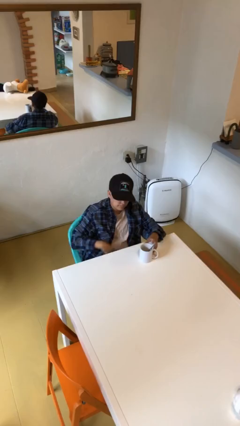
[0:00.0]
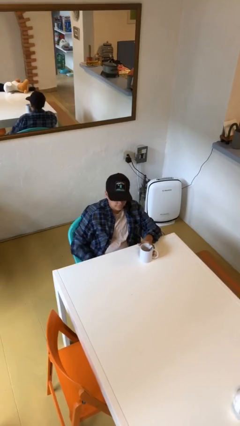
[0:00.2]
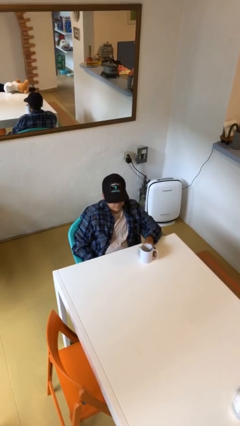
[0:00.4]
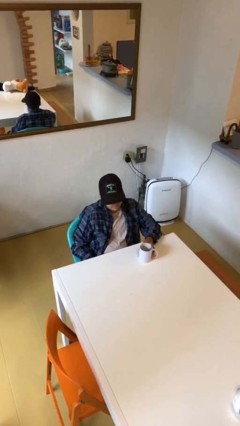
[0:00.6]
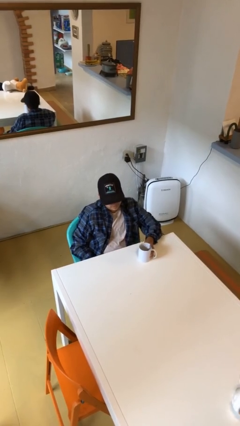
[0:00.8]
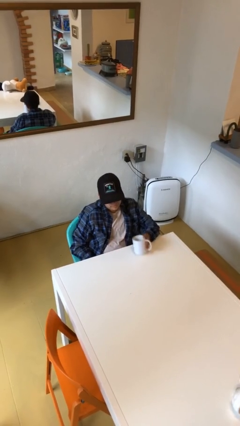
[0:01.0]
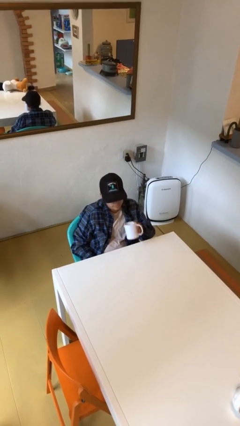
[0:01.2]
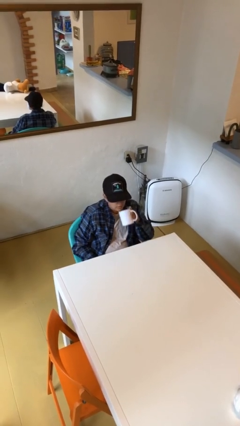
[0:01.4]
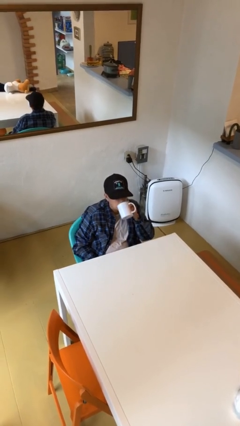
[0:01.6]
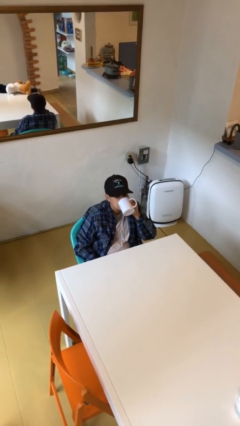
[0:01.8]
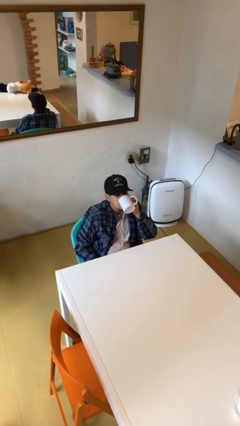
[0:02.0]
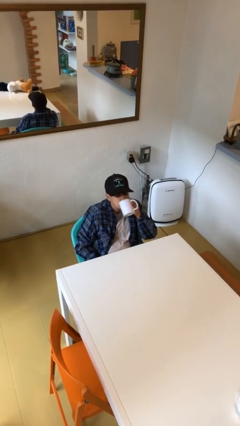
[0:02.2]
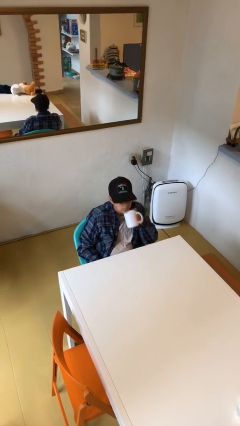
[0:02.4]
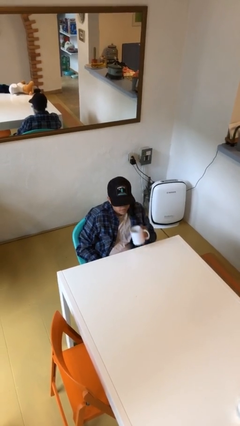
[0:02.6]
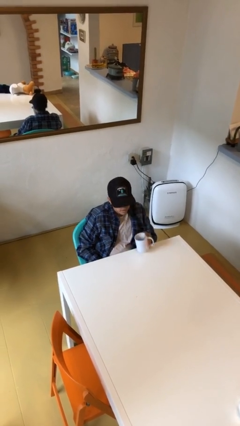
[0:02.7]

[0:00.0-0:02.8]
person drinks from mug

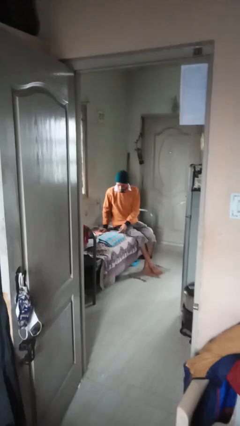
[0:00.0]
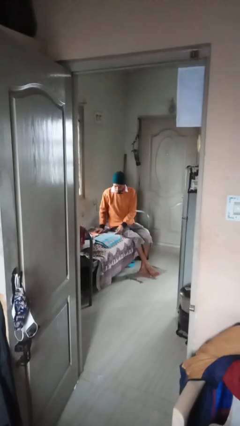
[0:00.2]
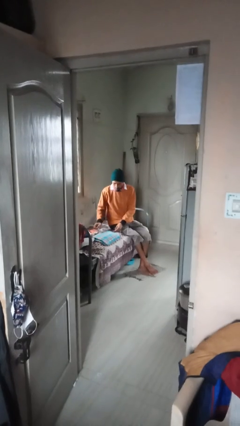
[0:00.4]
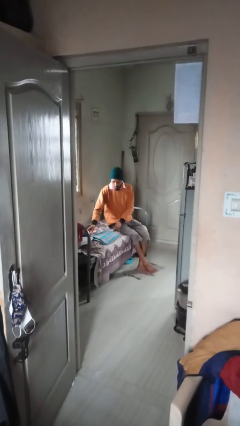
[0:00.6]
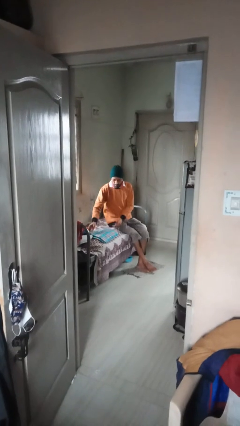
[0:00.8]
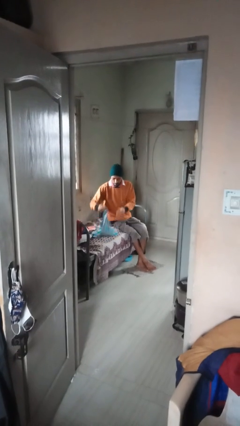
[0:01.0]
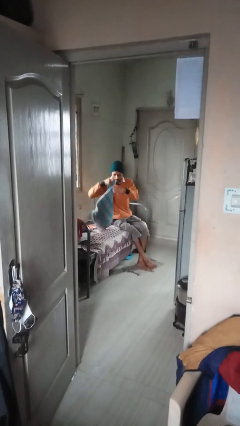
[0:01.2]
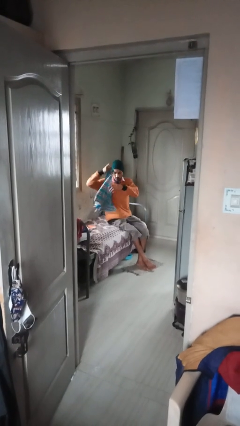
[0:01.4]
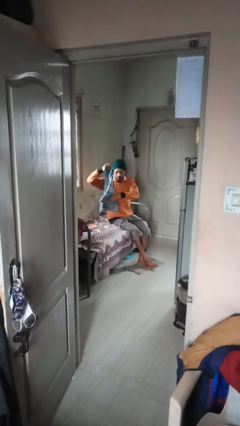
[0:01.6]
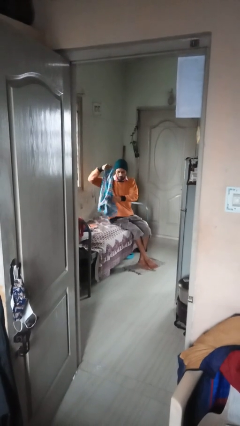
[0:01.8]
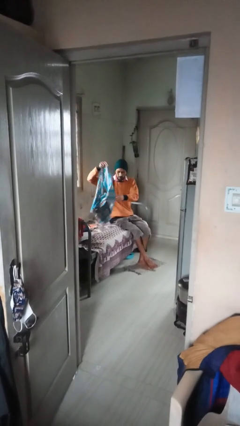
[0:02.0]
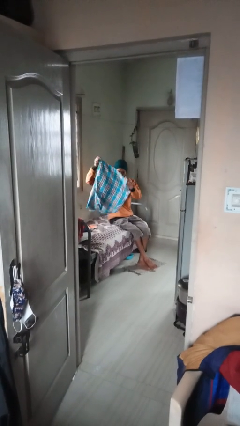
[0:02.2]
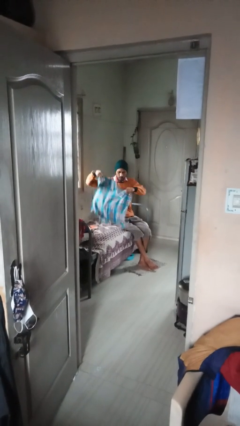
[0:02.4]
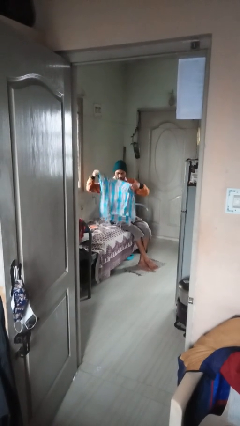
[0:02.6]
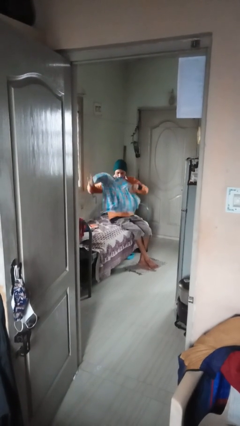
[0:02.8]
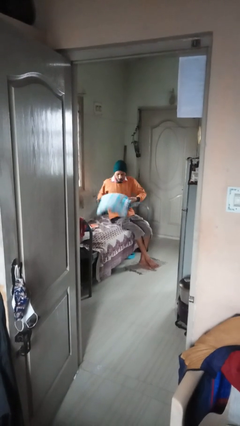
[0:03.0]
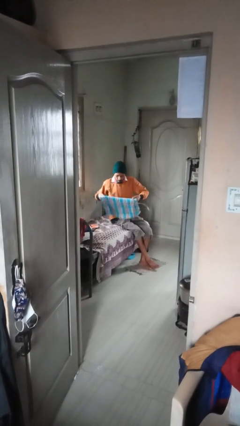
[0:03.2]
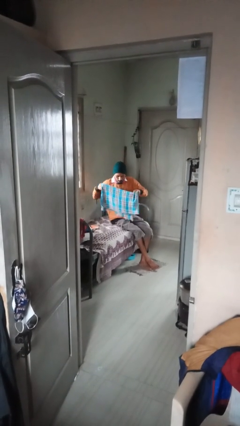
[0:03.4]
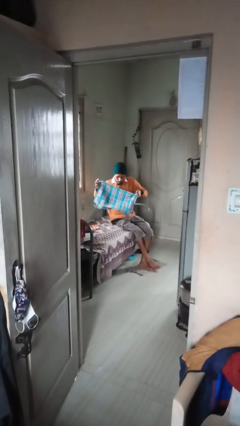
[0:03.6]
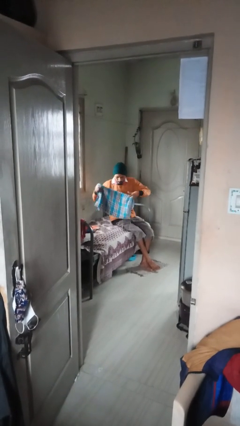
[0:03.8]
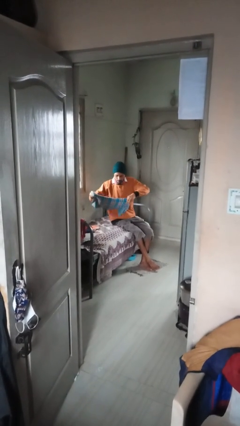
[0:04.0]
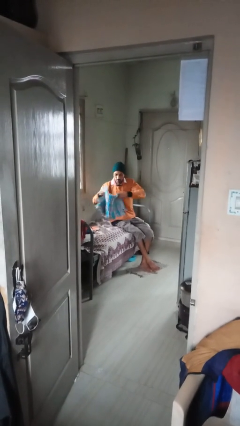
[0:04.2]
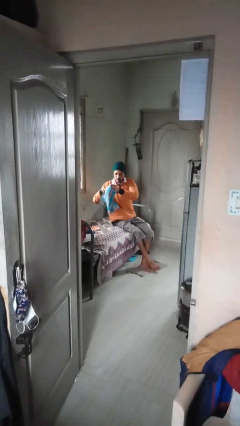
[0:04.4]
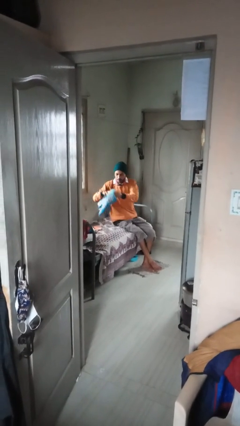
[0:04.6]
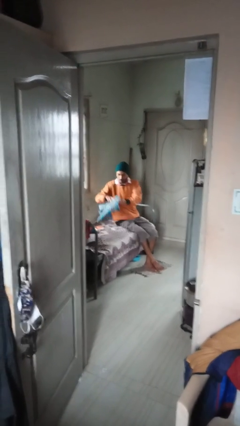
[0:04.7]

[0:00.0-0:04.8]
person folds towel

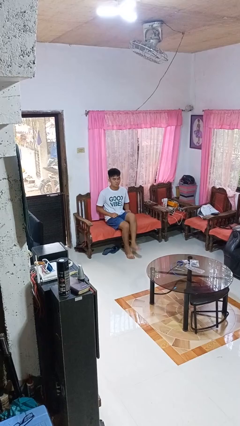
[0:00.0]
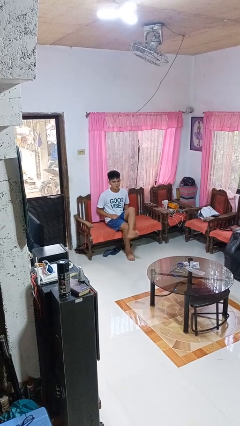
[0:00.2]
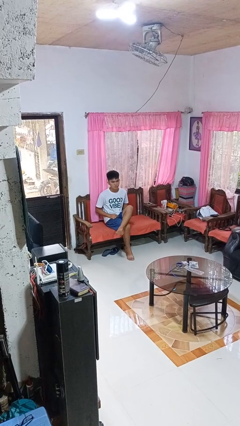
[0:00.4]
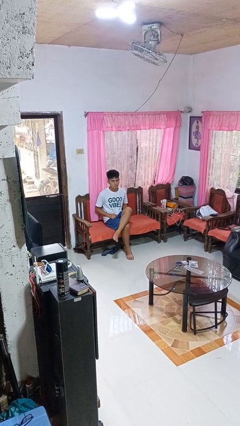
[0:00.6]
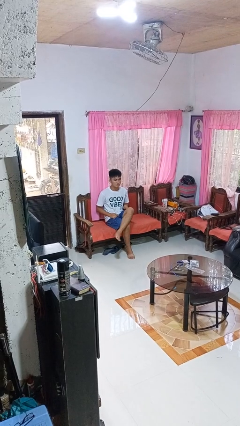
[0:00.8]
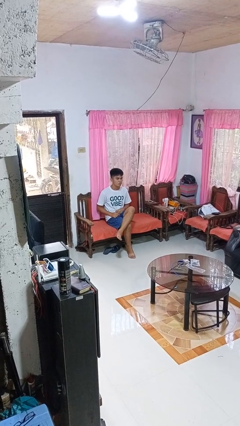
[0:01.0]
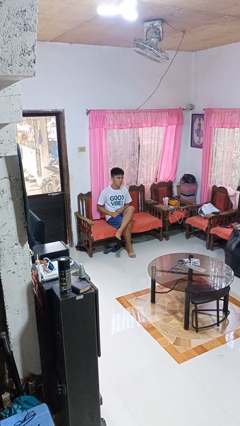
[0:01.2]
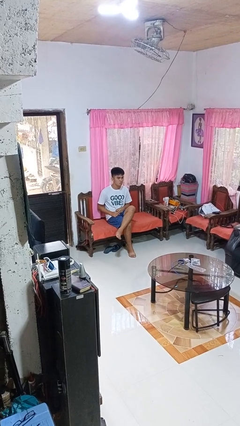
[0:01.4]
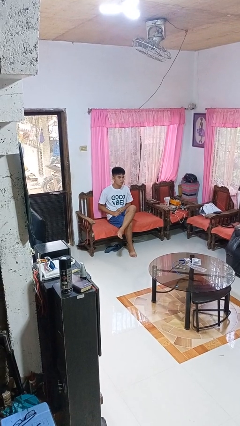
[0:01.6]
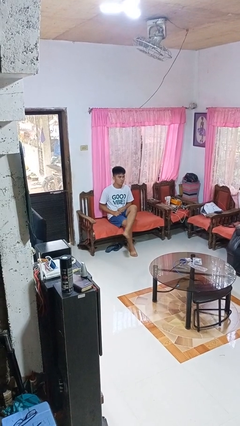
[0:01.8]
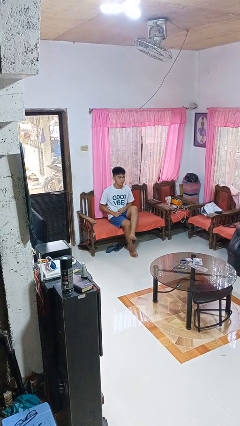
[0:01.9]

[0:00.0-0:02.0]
person crosses legs

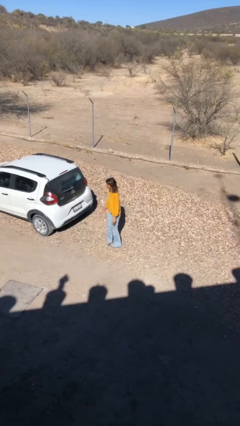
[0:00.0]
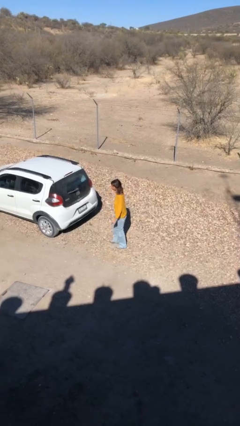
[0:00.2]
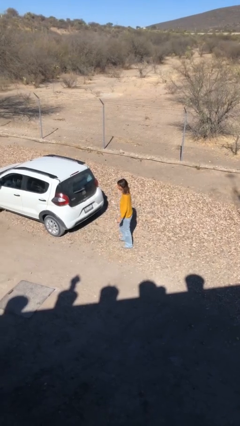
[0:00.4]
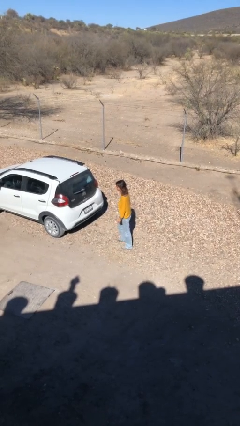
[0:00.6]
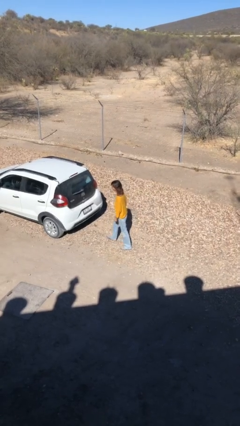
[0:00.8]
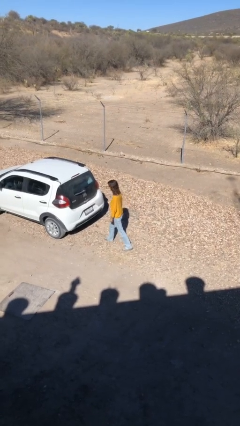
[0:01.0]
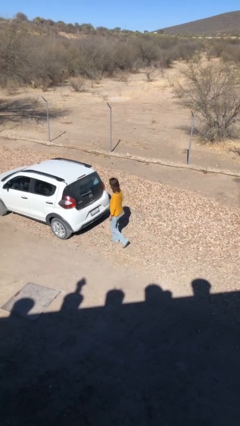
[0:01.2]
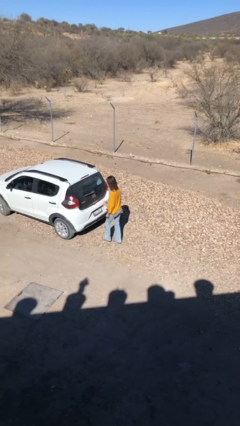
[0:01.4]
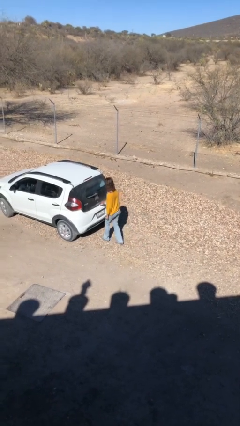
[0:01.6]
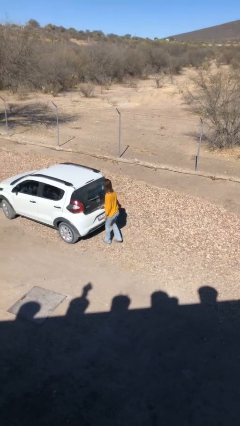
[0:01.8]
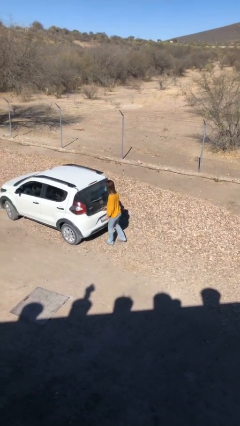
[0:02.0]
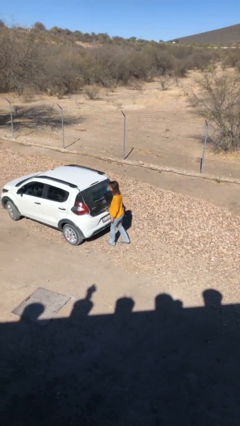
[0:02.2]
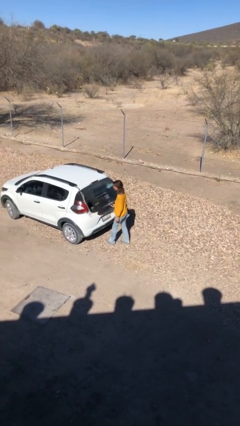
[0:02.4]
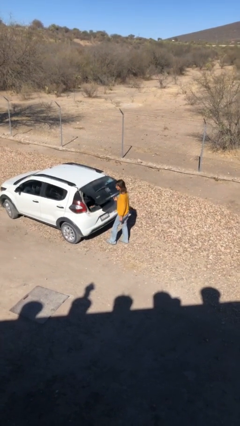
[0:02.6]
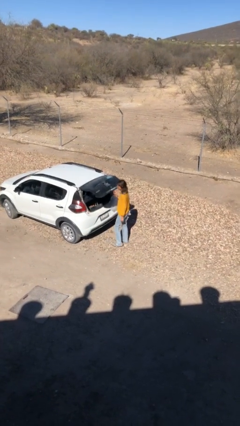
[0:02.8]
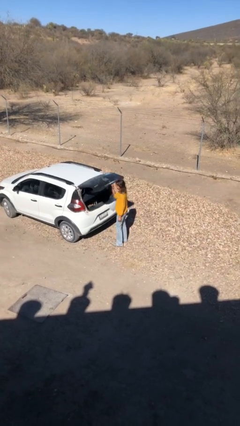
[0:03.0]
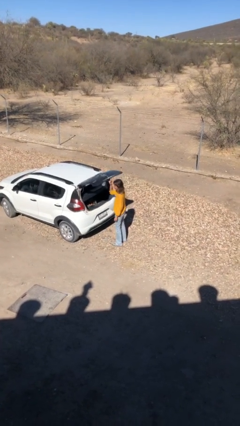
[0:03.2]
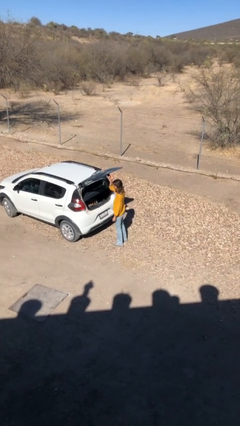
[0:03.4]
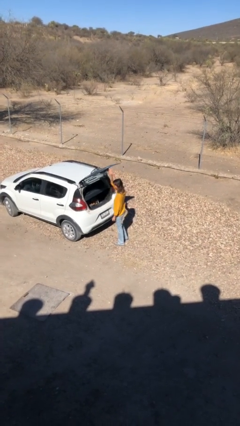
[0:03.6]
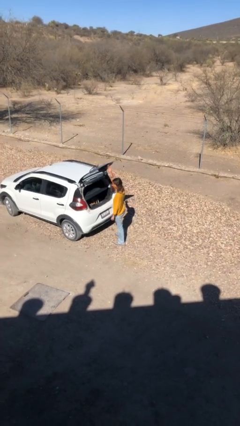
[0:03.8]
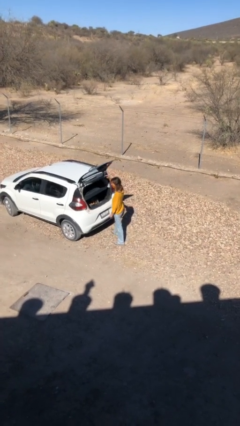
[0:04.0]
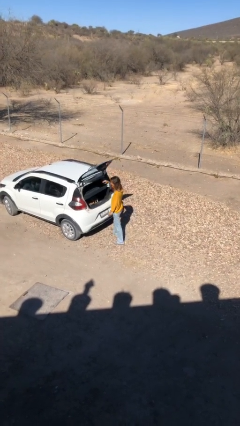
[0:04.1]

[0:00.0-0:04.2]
person opens car trunk

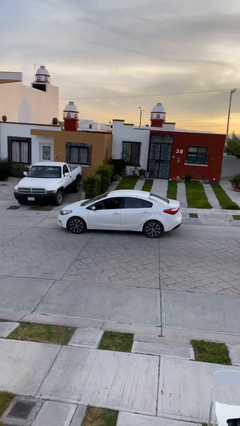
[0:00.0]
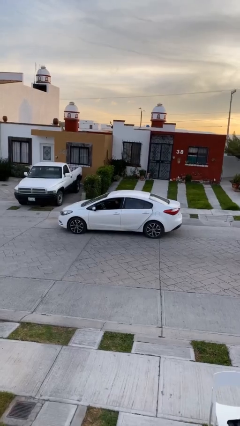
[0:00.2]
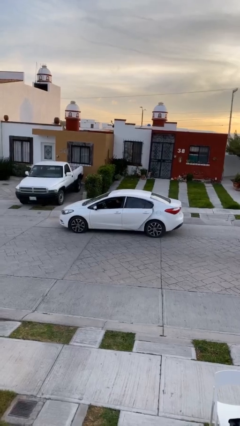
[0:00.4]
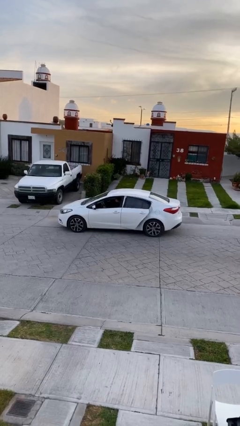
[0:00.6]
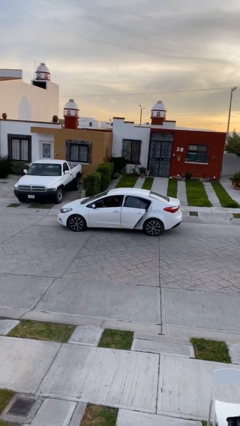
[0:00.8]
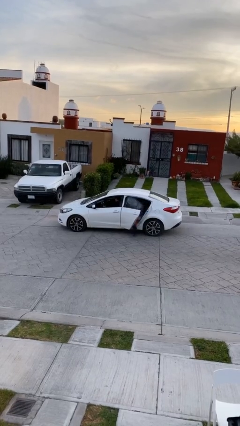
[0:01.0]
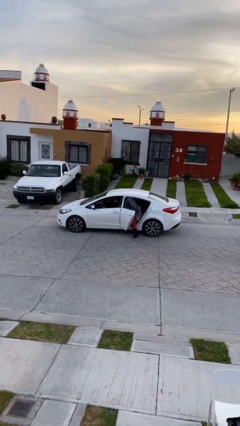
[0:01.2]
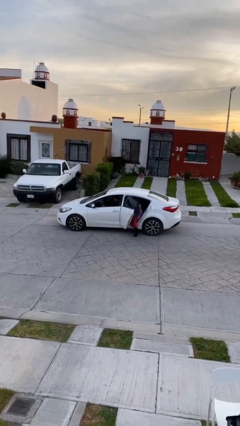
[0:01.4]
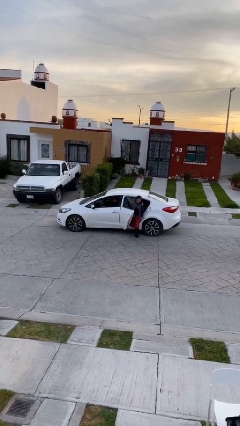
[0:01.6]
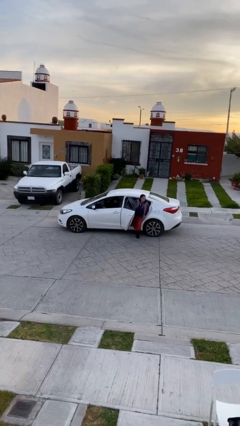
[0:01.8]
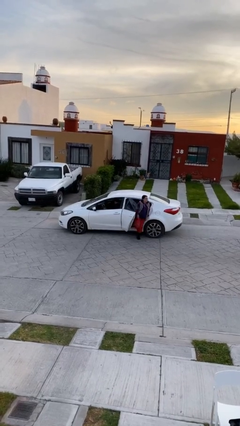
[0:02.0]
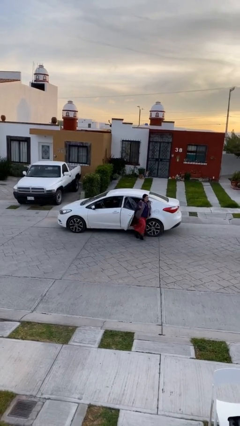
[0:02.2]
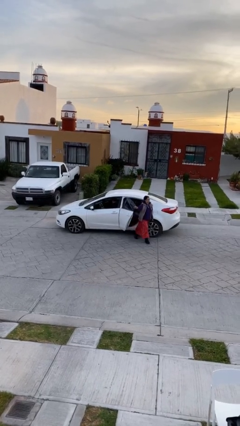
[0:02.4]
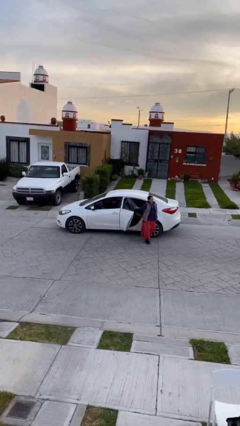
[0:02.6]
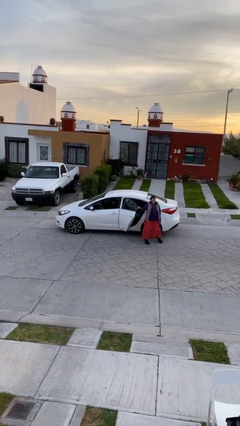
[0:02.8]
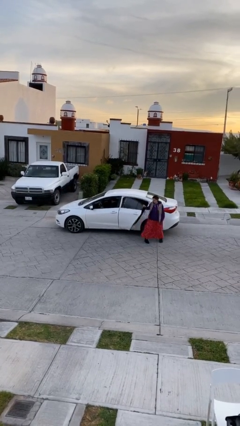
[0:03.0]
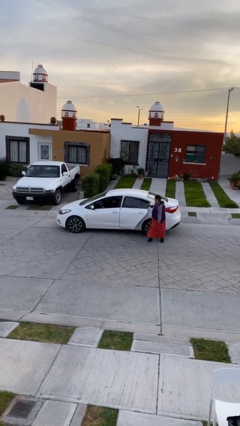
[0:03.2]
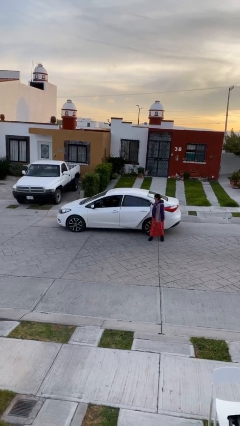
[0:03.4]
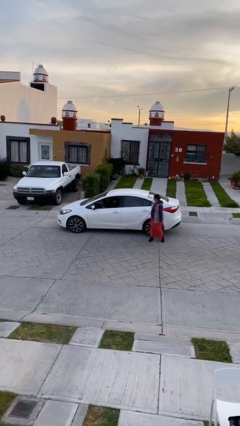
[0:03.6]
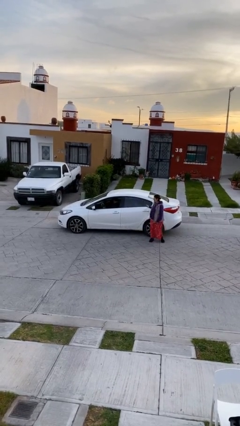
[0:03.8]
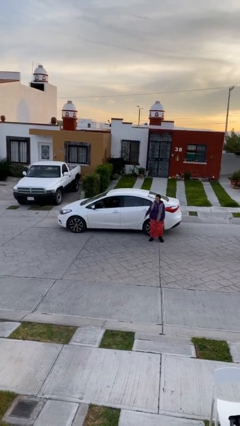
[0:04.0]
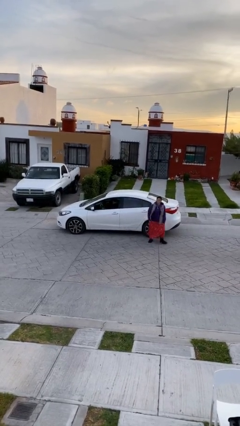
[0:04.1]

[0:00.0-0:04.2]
car drops off person
